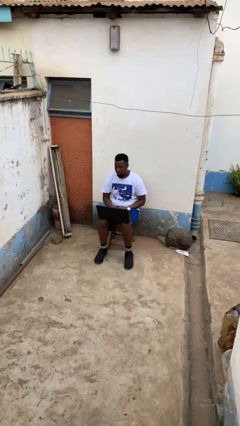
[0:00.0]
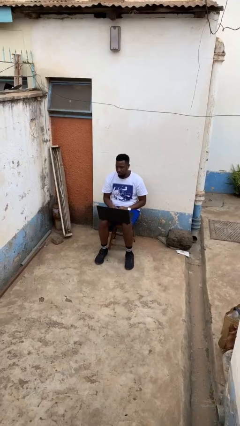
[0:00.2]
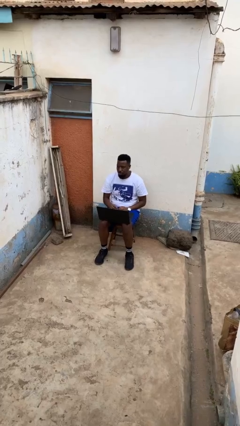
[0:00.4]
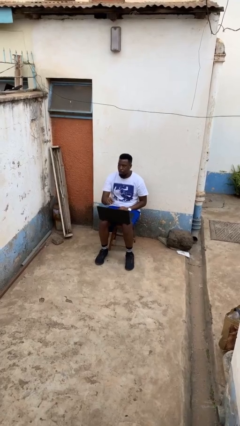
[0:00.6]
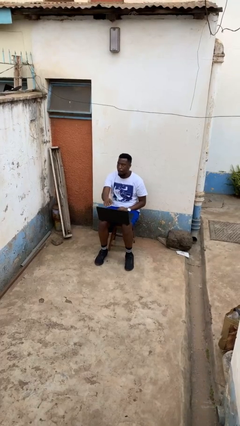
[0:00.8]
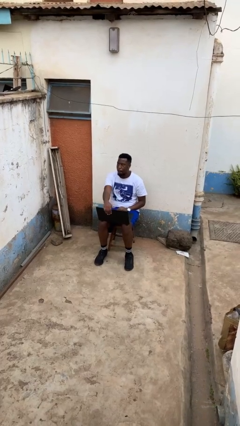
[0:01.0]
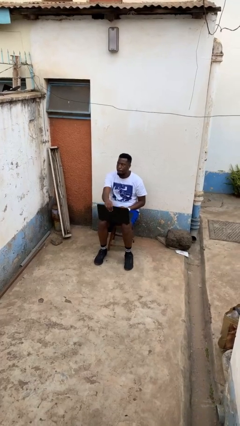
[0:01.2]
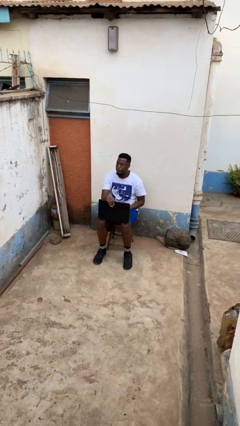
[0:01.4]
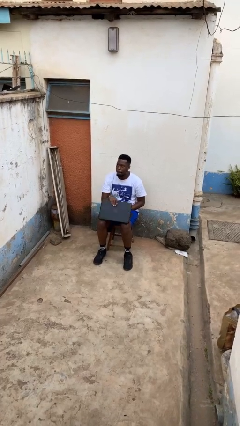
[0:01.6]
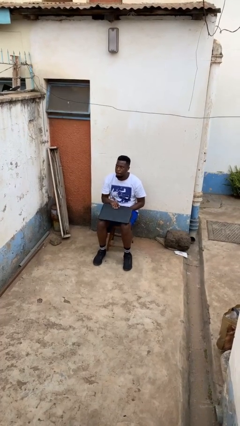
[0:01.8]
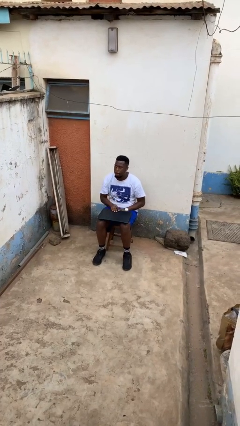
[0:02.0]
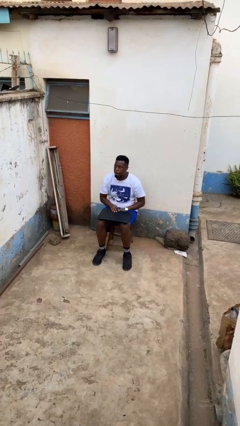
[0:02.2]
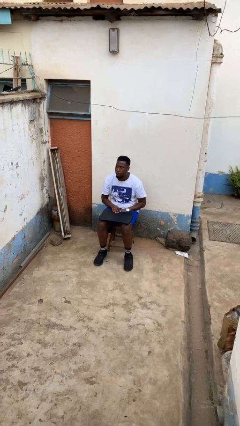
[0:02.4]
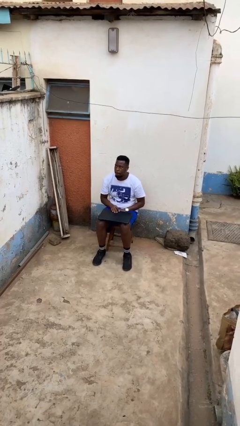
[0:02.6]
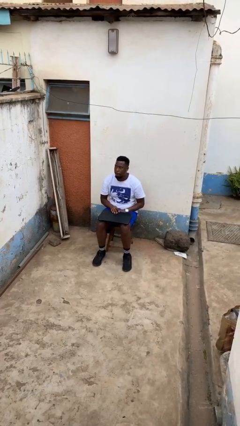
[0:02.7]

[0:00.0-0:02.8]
person closes laptop

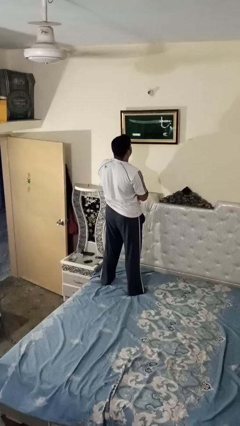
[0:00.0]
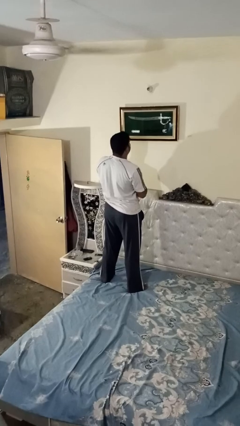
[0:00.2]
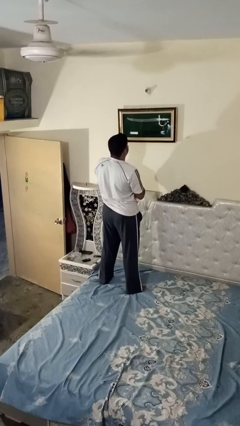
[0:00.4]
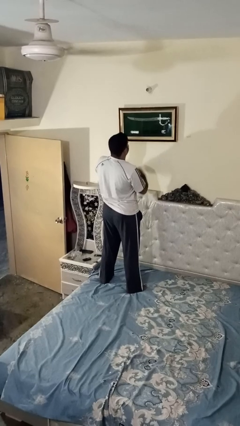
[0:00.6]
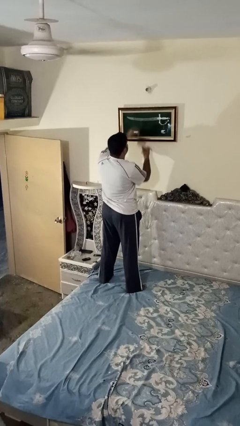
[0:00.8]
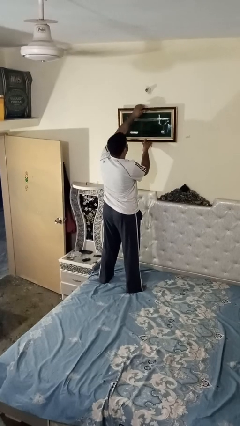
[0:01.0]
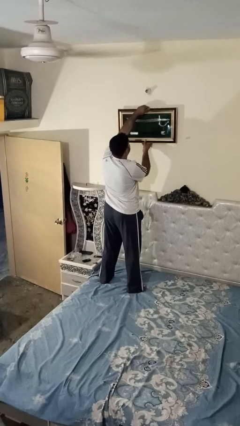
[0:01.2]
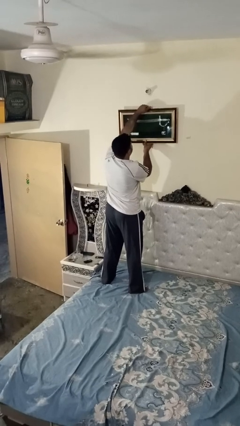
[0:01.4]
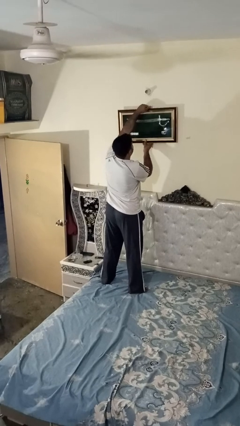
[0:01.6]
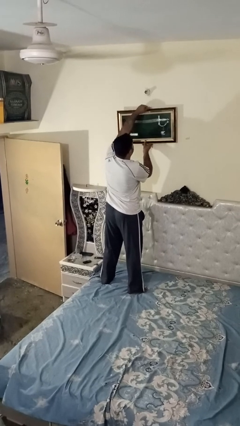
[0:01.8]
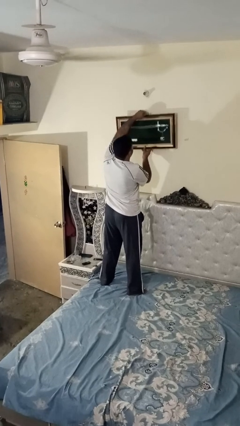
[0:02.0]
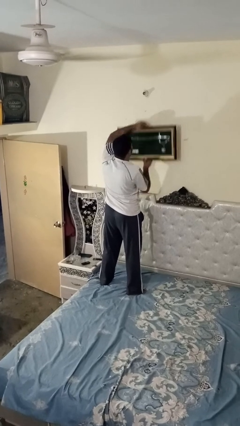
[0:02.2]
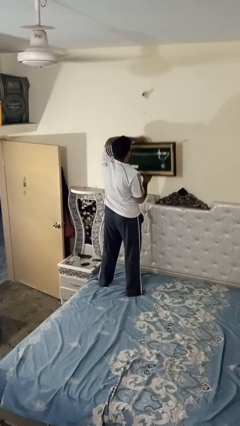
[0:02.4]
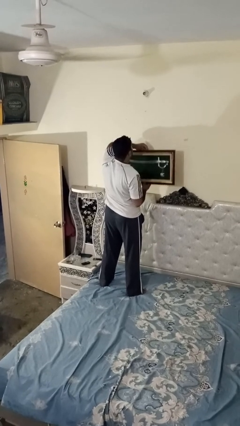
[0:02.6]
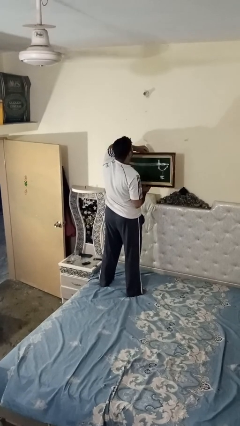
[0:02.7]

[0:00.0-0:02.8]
person takes down picture frame

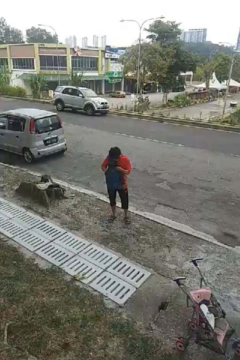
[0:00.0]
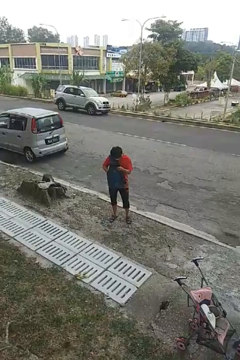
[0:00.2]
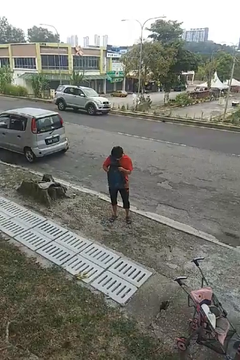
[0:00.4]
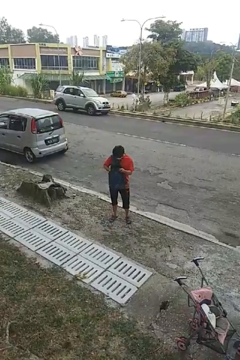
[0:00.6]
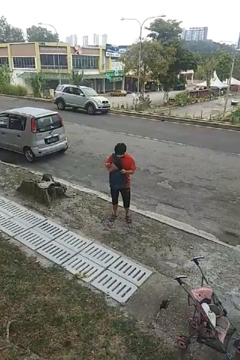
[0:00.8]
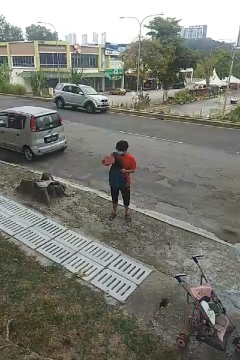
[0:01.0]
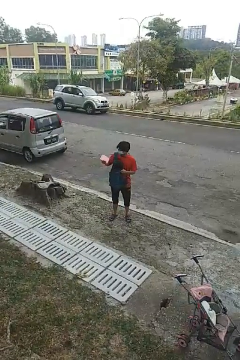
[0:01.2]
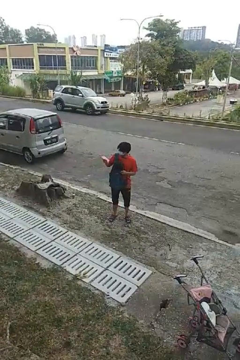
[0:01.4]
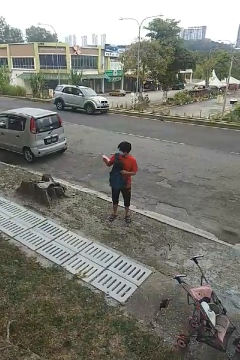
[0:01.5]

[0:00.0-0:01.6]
person takes object from backpack

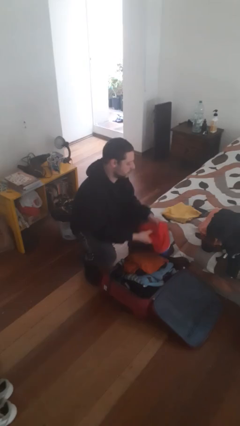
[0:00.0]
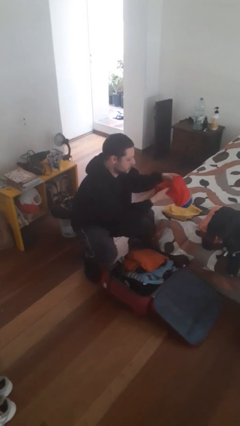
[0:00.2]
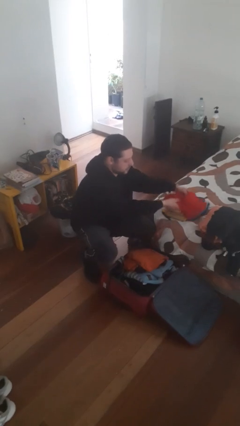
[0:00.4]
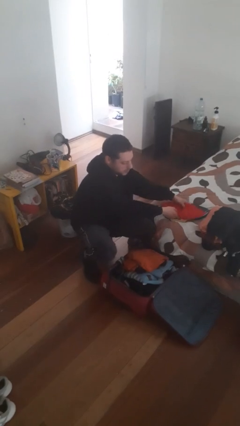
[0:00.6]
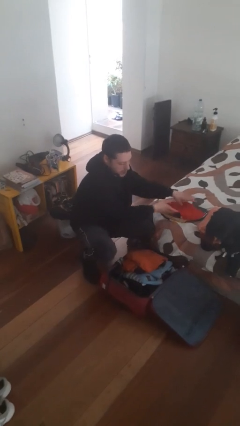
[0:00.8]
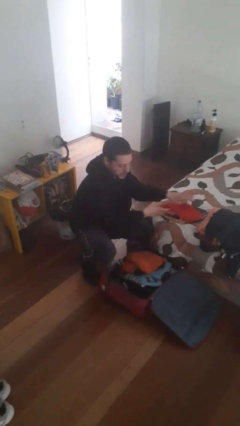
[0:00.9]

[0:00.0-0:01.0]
person unloads clothes from suitcase

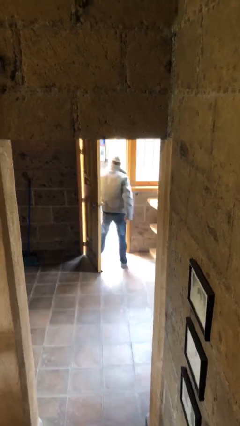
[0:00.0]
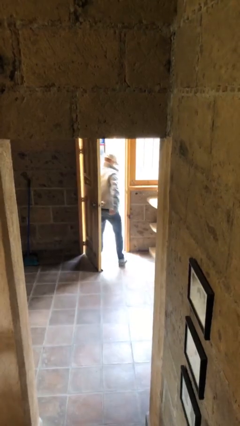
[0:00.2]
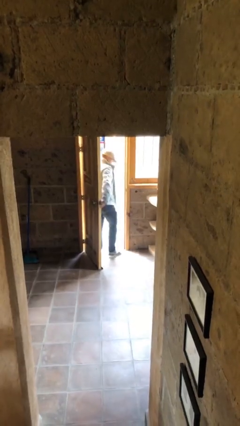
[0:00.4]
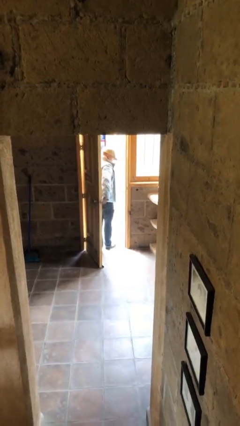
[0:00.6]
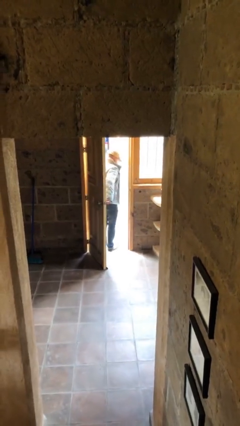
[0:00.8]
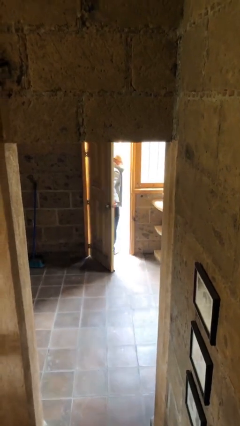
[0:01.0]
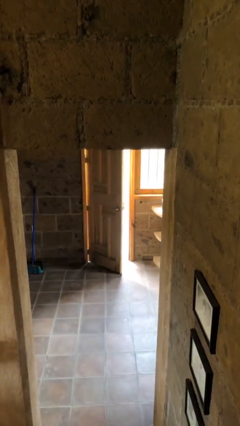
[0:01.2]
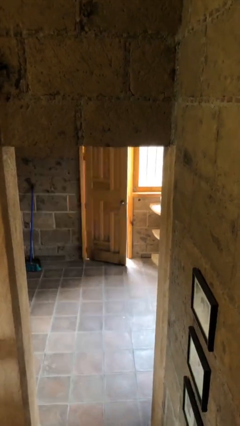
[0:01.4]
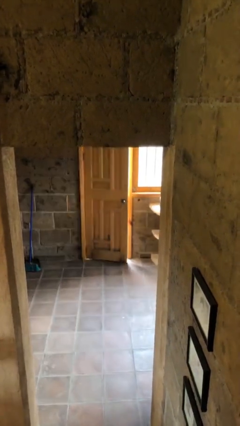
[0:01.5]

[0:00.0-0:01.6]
person closes facility door

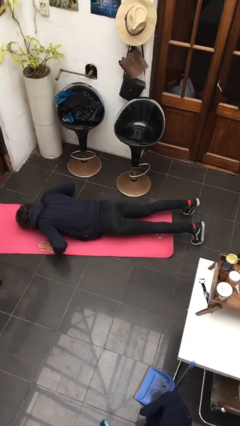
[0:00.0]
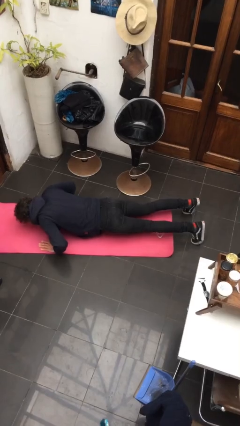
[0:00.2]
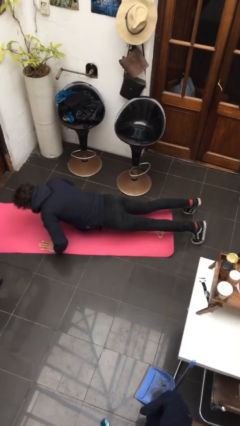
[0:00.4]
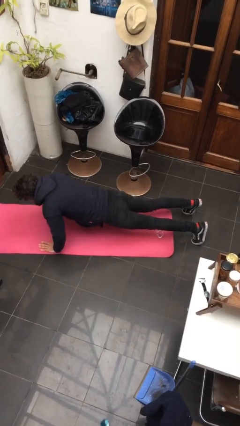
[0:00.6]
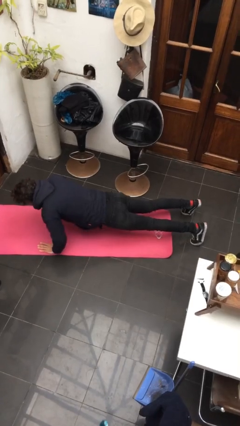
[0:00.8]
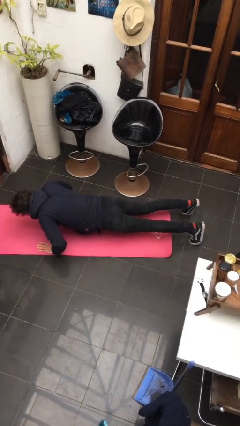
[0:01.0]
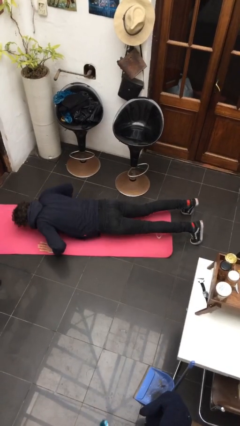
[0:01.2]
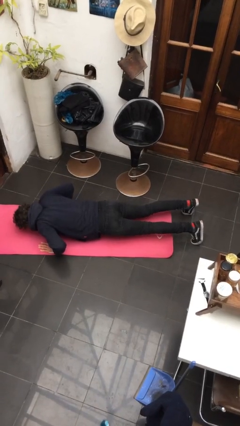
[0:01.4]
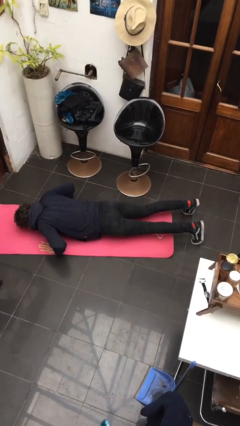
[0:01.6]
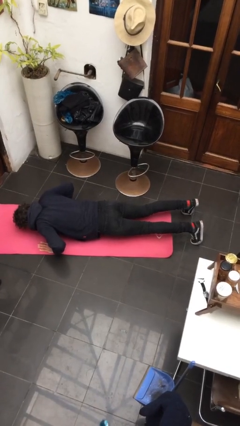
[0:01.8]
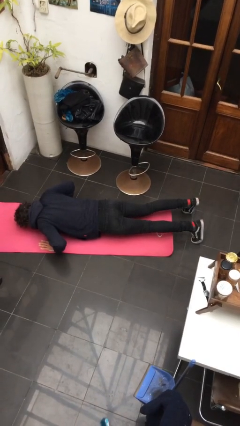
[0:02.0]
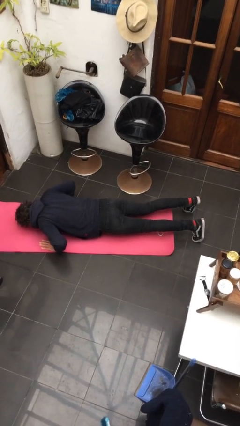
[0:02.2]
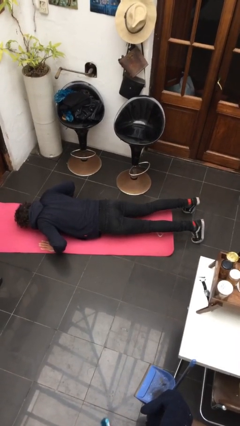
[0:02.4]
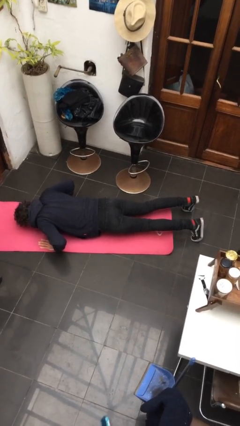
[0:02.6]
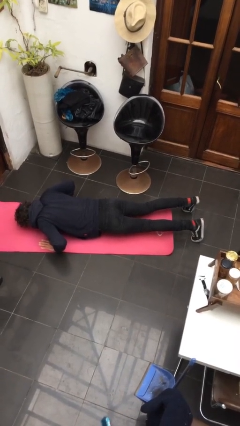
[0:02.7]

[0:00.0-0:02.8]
person exercises with pushup

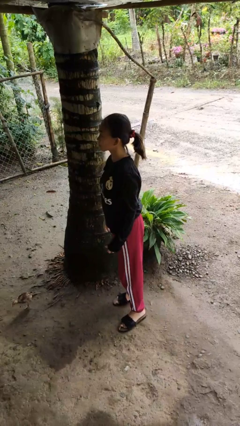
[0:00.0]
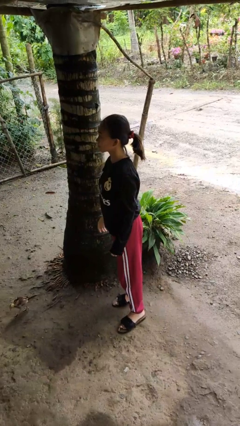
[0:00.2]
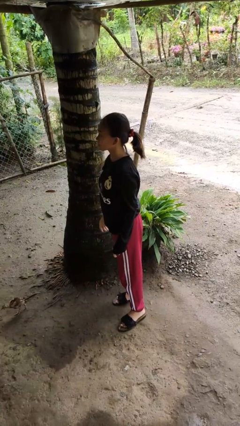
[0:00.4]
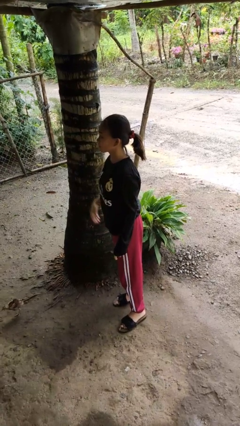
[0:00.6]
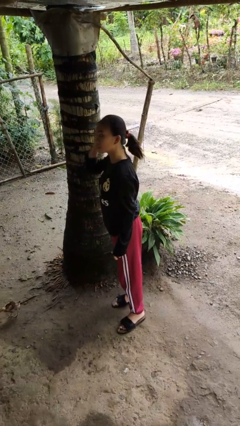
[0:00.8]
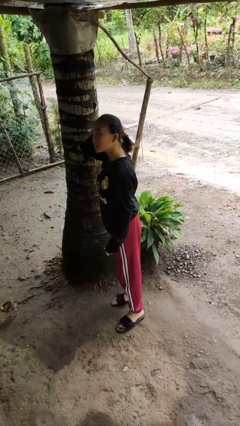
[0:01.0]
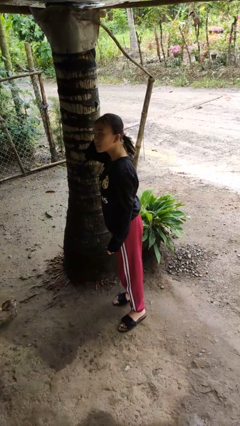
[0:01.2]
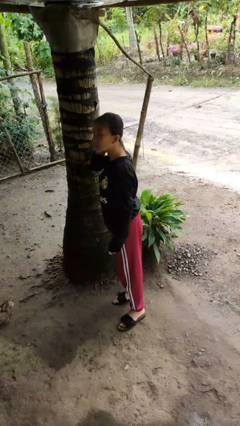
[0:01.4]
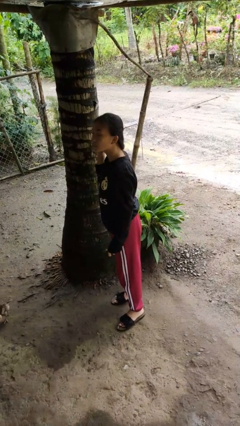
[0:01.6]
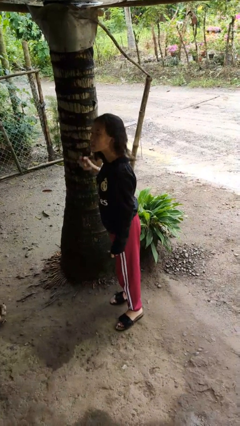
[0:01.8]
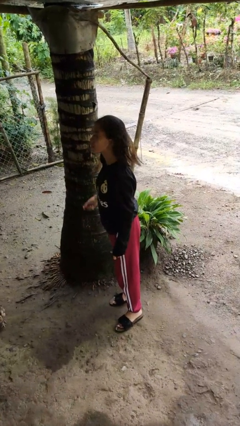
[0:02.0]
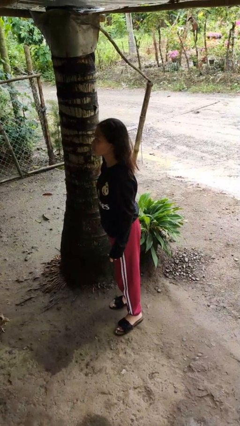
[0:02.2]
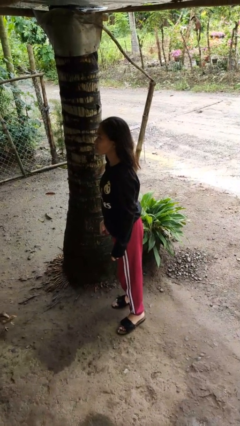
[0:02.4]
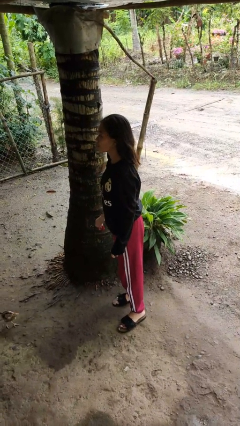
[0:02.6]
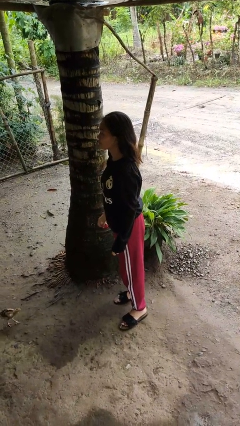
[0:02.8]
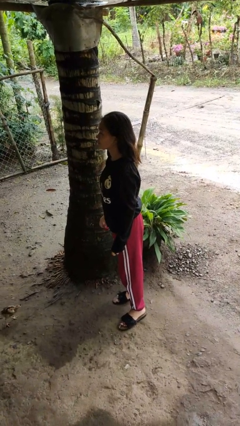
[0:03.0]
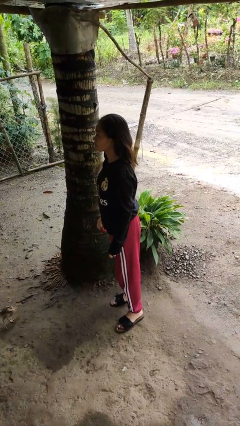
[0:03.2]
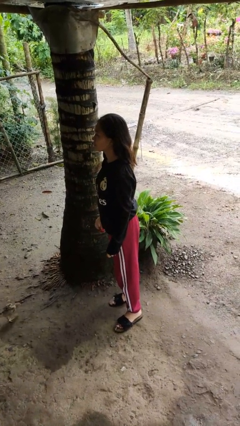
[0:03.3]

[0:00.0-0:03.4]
person takes off hairtie

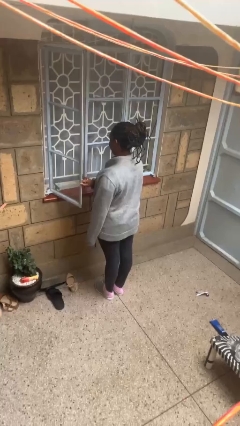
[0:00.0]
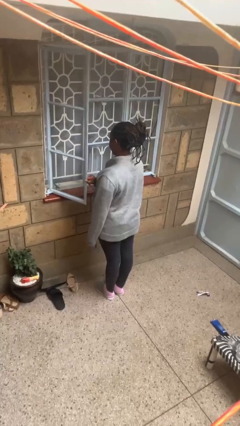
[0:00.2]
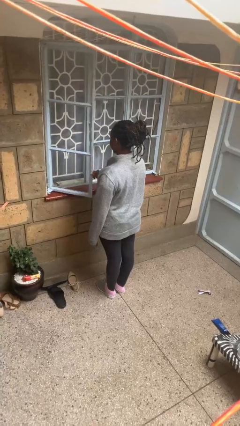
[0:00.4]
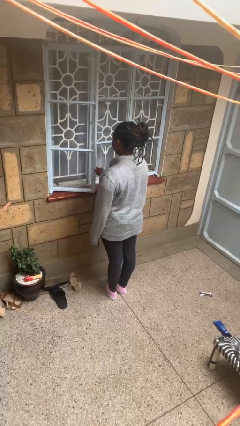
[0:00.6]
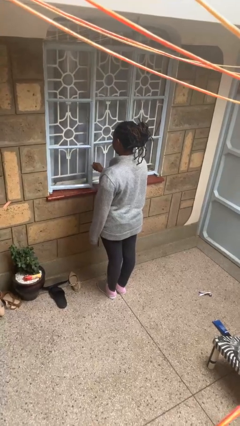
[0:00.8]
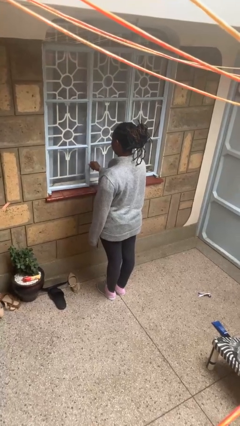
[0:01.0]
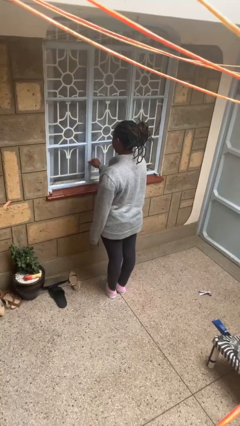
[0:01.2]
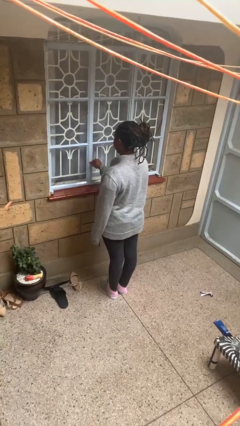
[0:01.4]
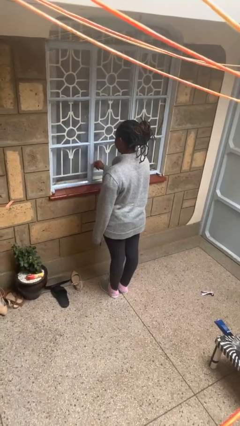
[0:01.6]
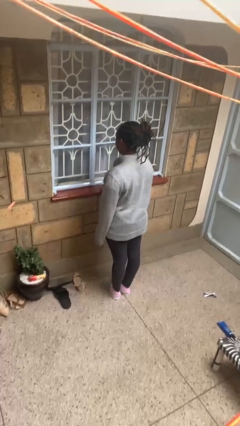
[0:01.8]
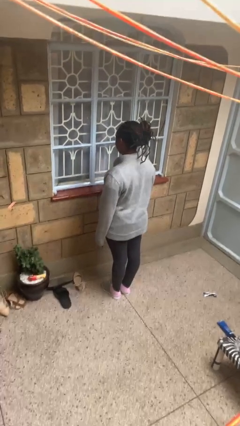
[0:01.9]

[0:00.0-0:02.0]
person closes home window
